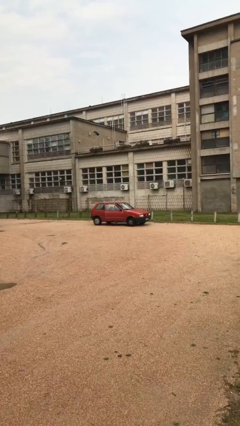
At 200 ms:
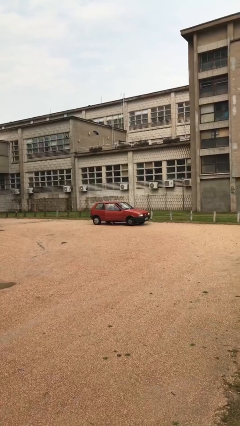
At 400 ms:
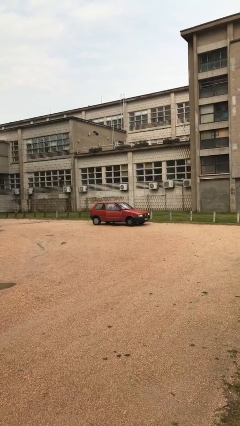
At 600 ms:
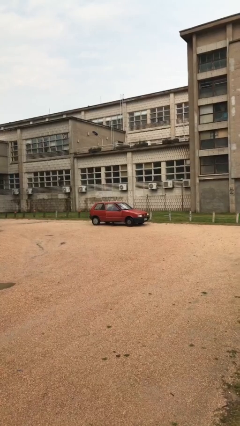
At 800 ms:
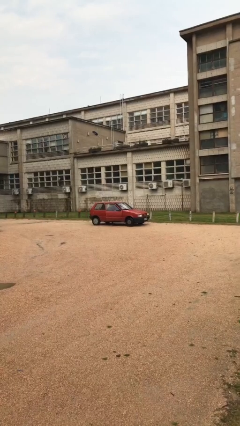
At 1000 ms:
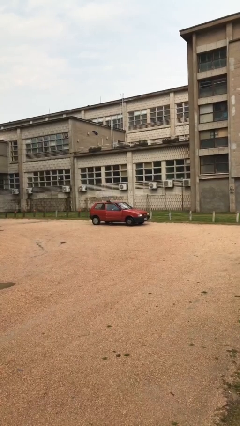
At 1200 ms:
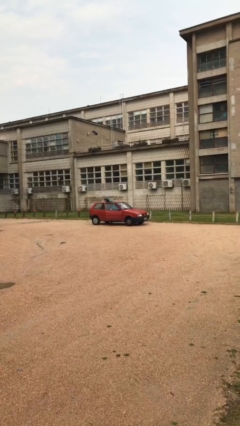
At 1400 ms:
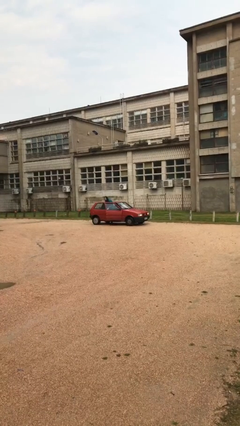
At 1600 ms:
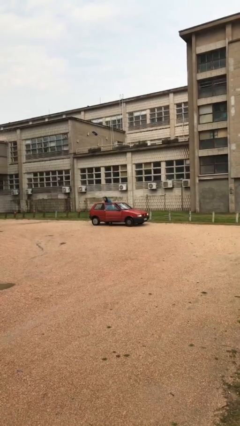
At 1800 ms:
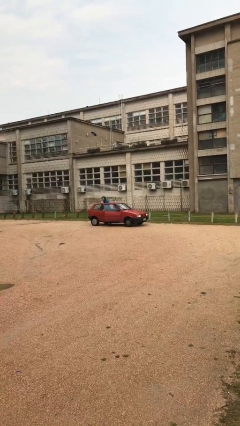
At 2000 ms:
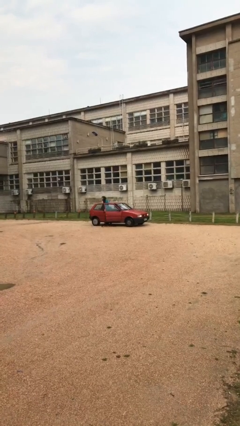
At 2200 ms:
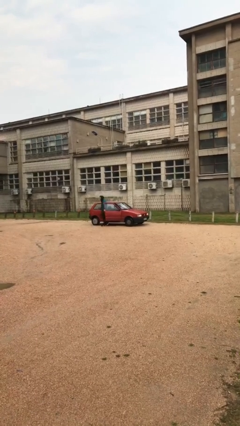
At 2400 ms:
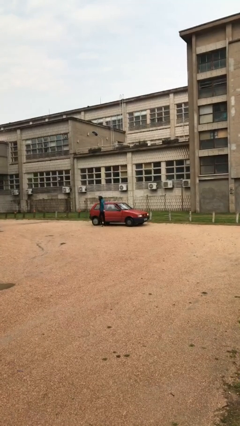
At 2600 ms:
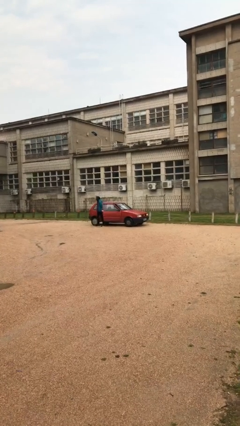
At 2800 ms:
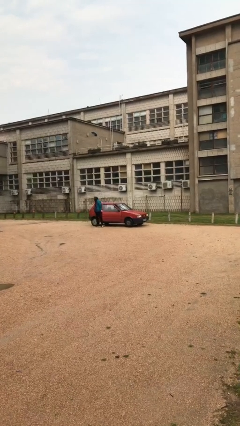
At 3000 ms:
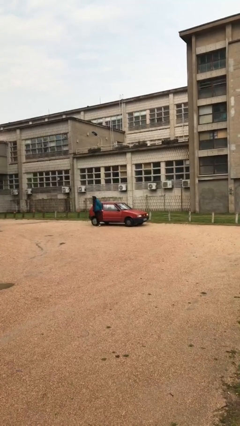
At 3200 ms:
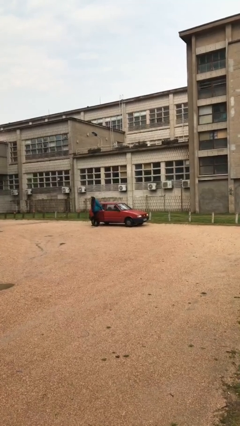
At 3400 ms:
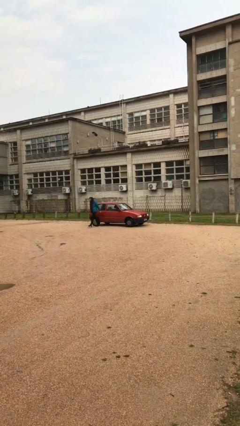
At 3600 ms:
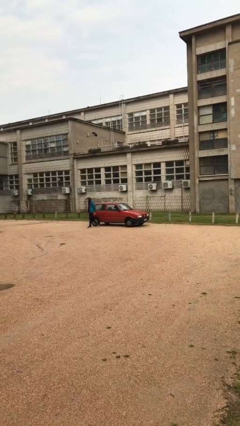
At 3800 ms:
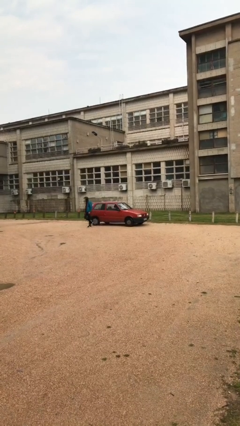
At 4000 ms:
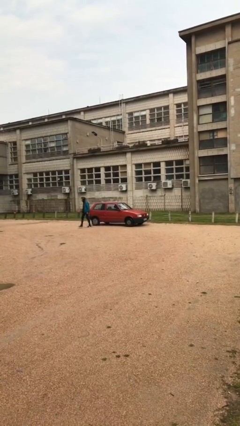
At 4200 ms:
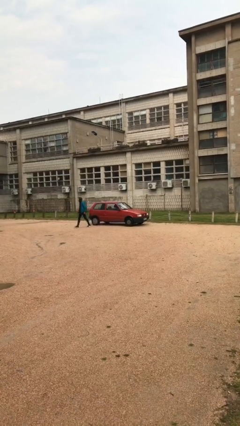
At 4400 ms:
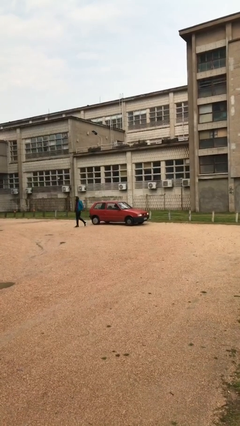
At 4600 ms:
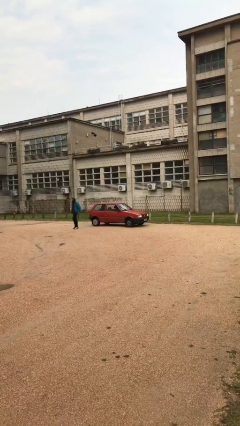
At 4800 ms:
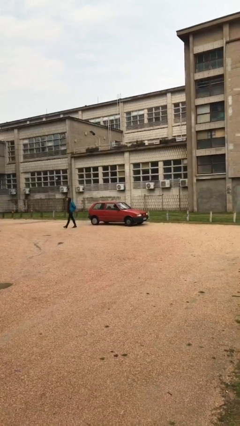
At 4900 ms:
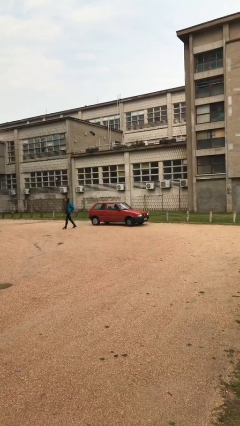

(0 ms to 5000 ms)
car drops off person

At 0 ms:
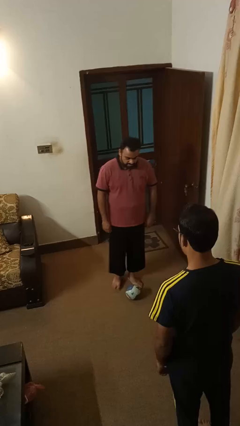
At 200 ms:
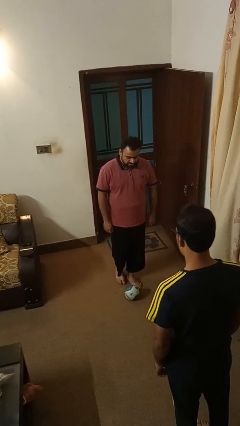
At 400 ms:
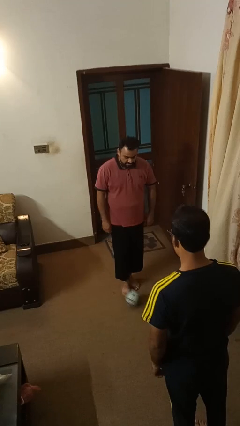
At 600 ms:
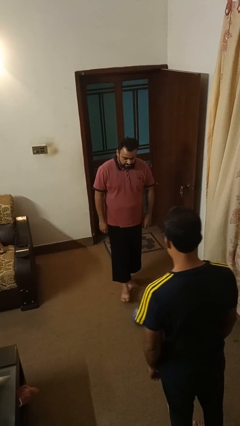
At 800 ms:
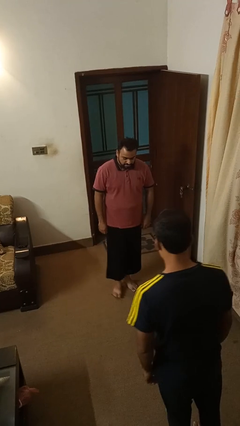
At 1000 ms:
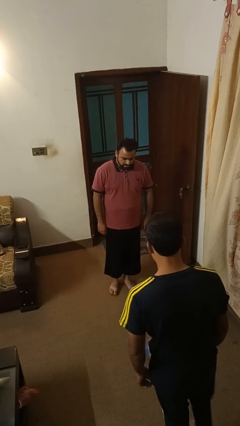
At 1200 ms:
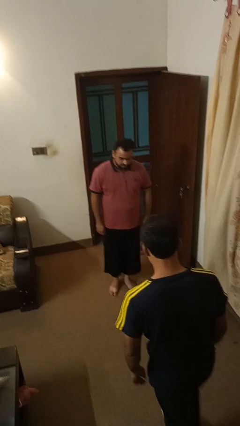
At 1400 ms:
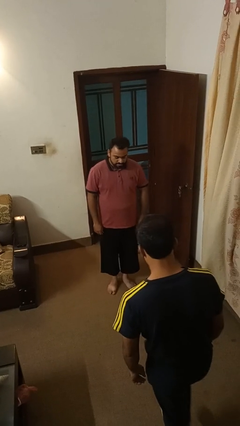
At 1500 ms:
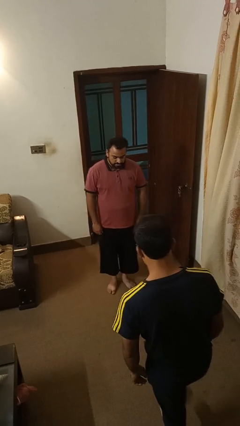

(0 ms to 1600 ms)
person kicks object to person

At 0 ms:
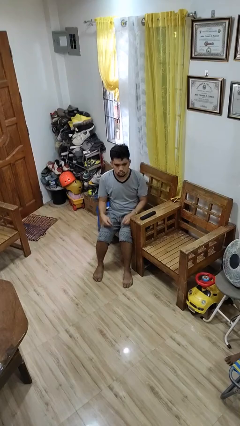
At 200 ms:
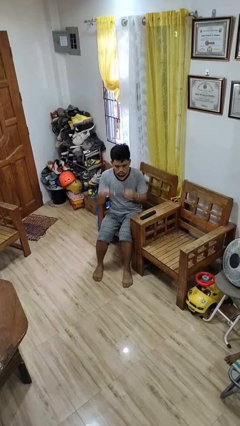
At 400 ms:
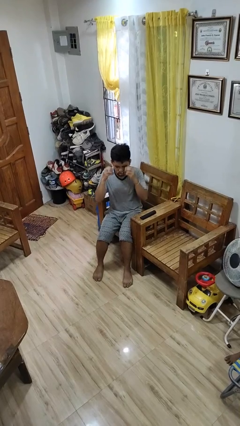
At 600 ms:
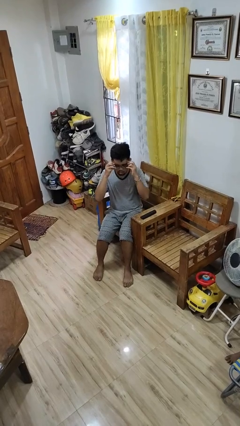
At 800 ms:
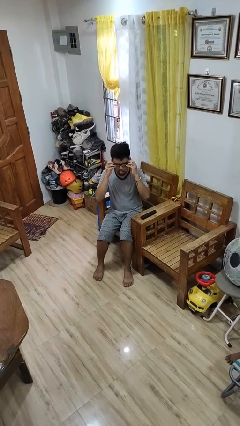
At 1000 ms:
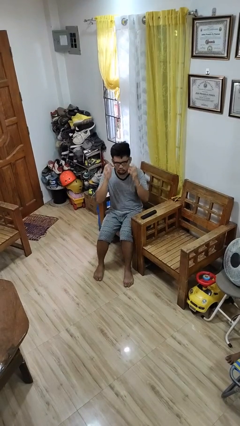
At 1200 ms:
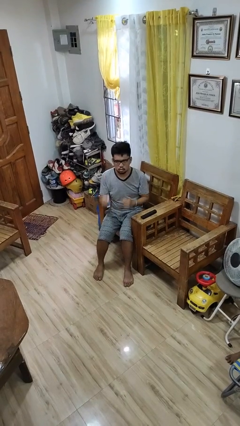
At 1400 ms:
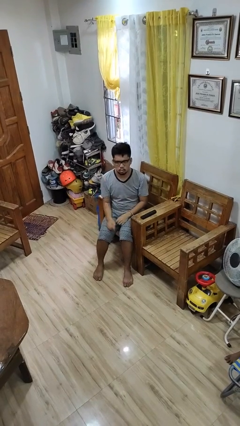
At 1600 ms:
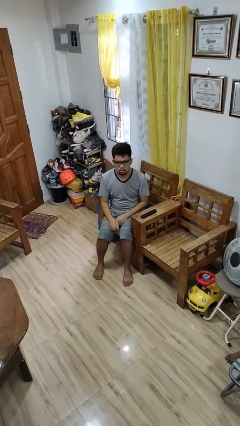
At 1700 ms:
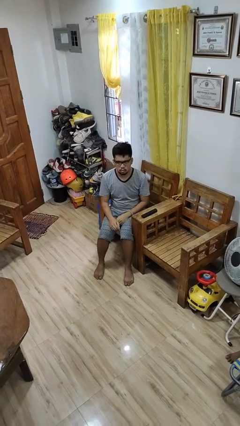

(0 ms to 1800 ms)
person puts on glasses

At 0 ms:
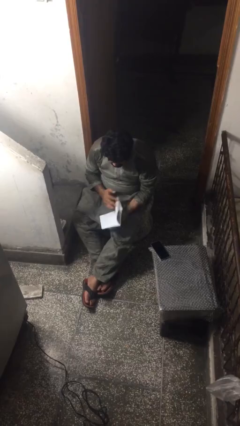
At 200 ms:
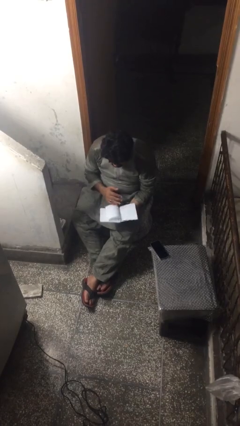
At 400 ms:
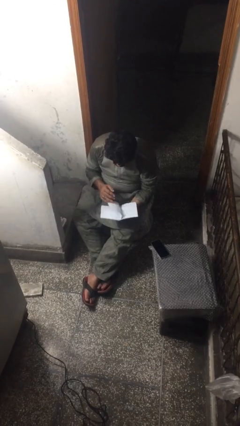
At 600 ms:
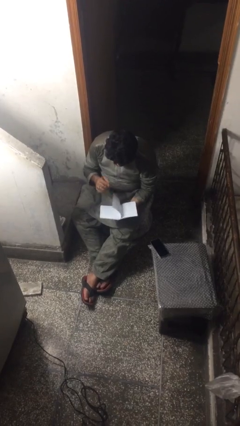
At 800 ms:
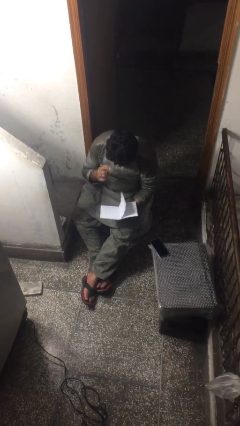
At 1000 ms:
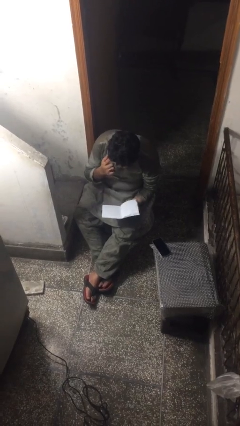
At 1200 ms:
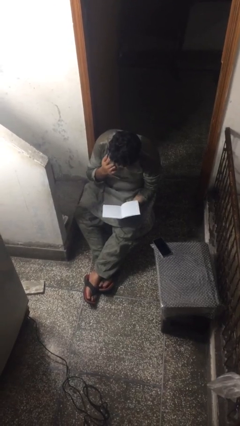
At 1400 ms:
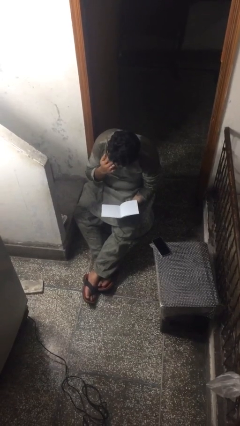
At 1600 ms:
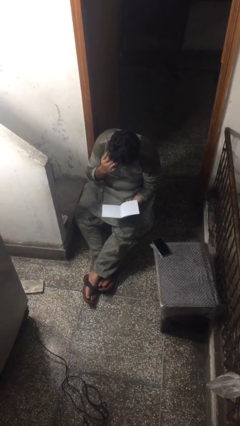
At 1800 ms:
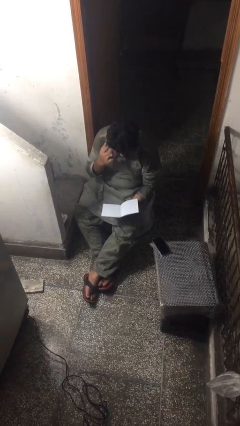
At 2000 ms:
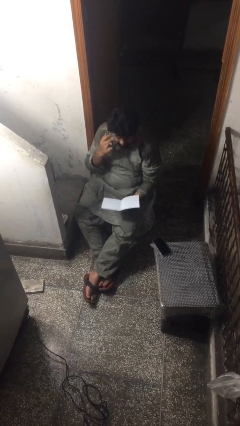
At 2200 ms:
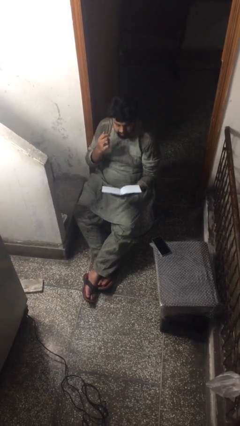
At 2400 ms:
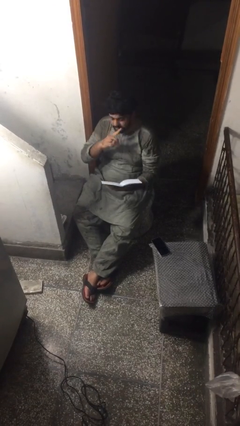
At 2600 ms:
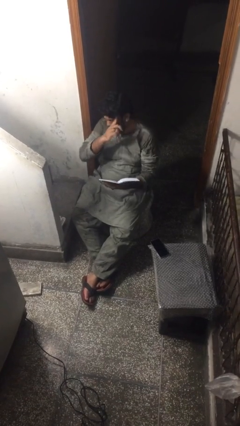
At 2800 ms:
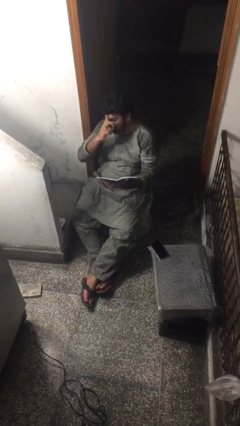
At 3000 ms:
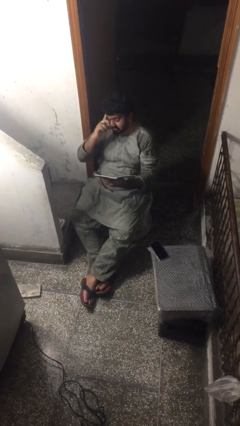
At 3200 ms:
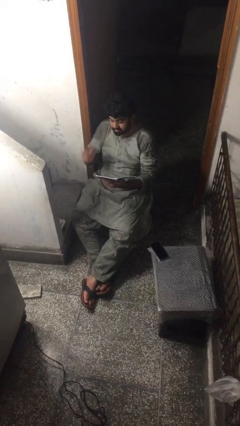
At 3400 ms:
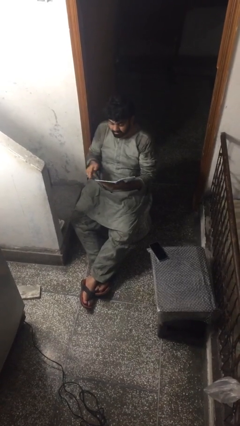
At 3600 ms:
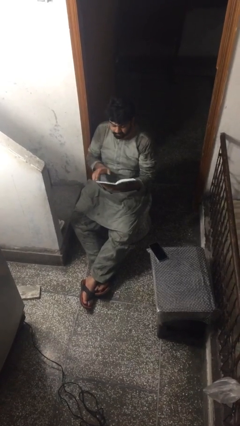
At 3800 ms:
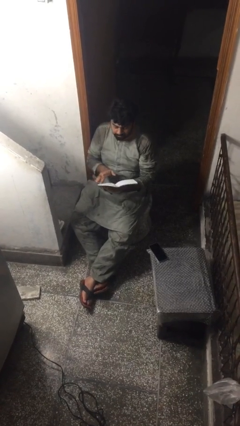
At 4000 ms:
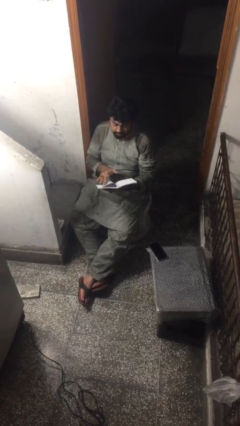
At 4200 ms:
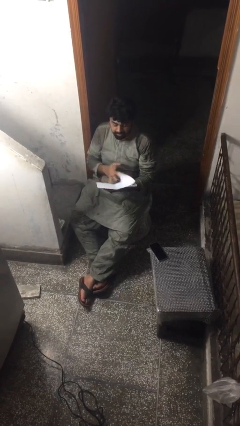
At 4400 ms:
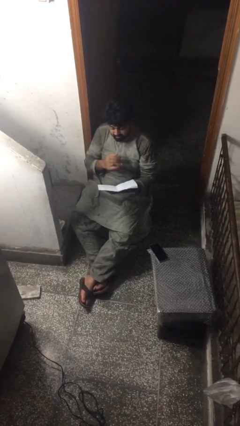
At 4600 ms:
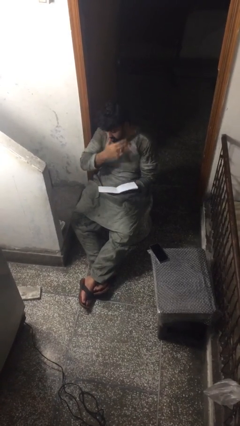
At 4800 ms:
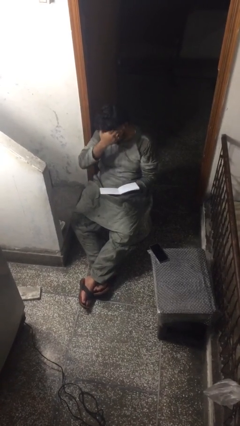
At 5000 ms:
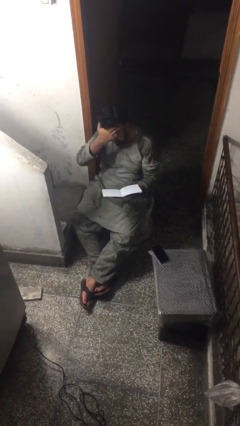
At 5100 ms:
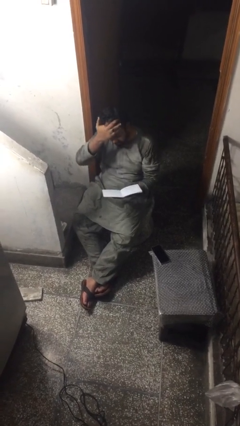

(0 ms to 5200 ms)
person reads document

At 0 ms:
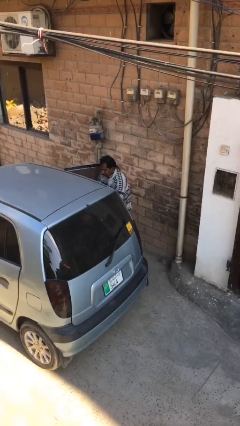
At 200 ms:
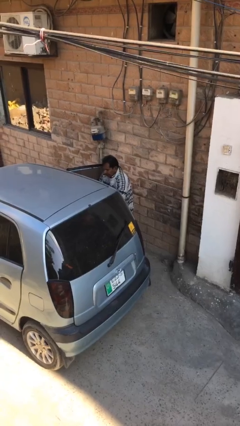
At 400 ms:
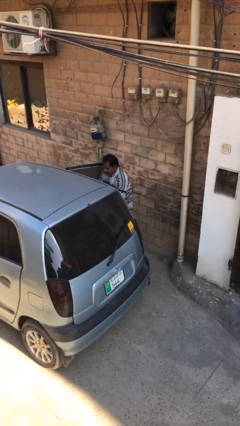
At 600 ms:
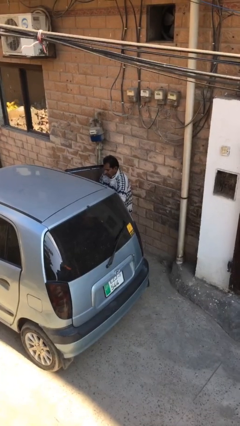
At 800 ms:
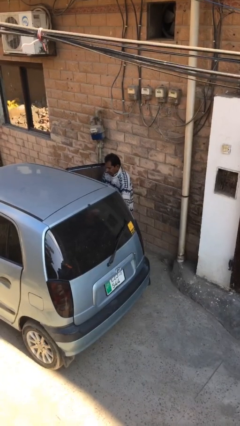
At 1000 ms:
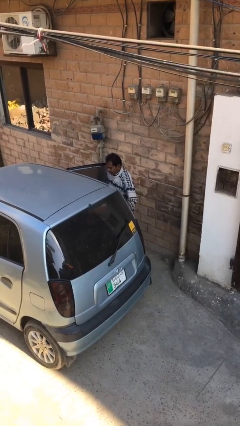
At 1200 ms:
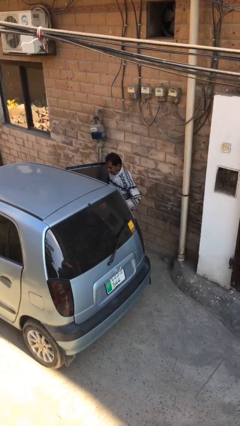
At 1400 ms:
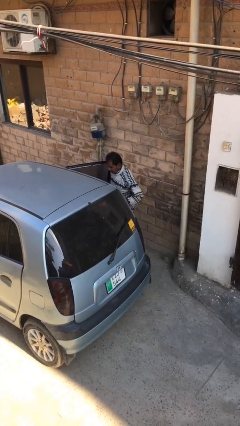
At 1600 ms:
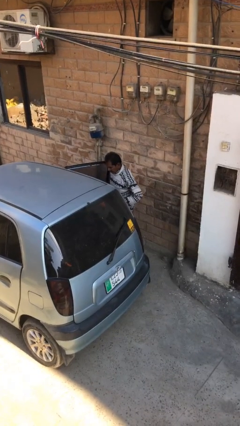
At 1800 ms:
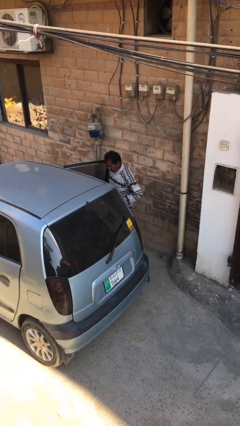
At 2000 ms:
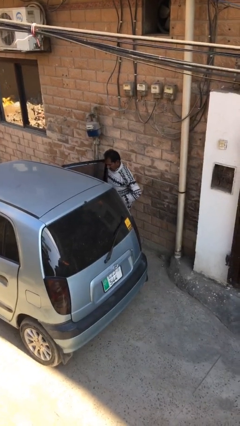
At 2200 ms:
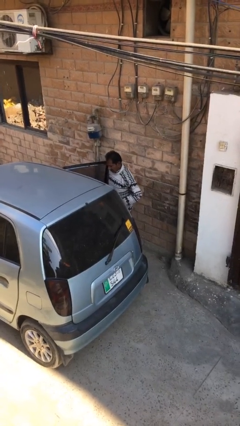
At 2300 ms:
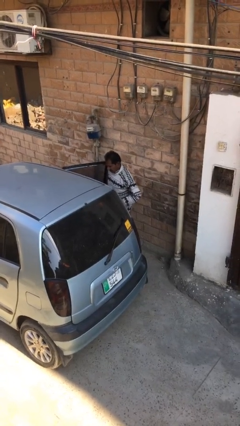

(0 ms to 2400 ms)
person unloads car

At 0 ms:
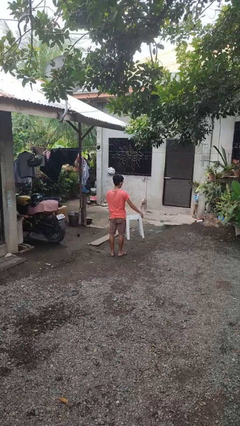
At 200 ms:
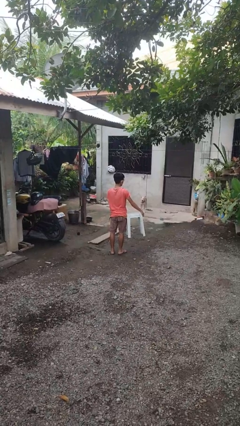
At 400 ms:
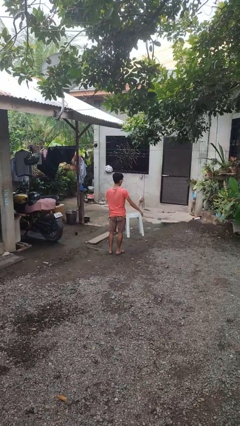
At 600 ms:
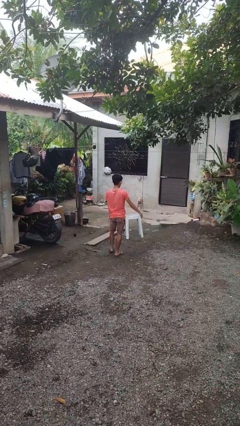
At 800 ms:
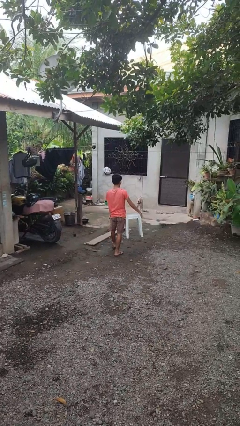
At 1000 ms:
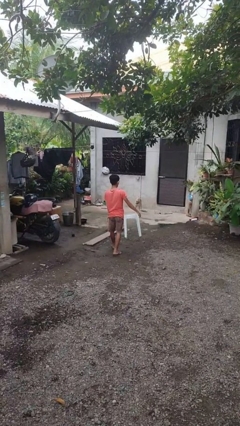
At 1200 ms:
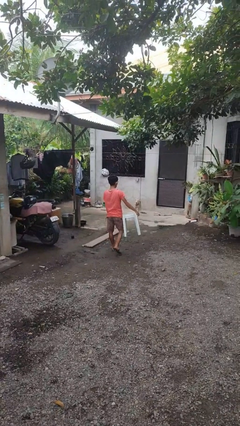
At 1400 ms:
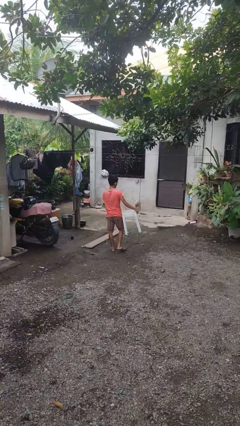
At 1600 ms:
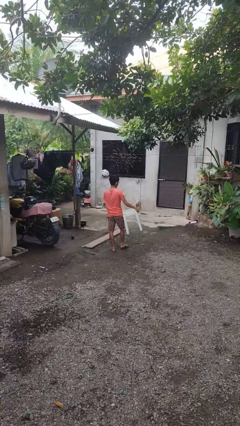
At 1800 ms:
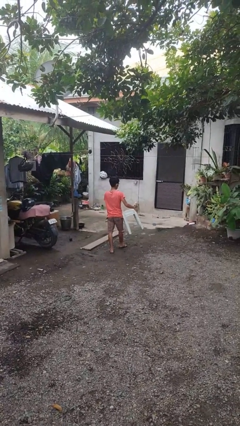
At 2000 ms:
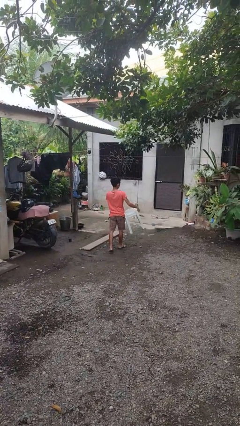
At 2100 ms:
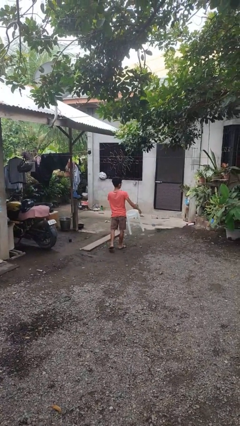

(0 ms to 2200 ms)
person carries furniture
